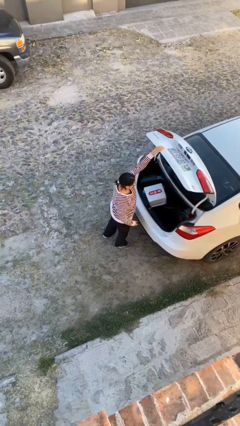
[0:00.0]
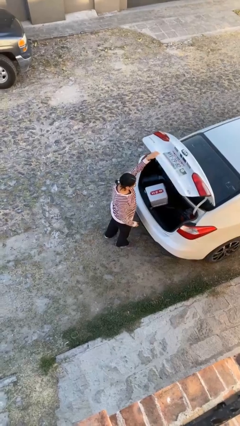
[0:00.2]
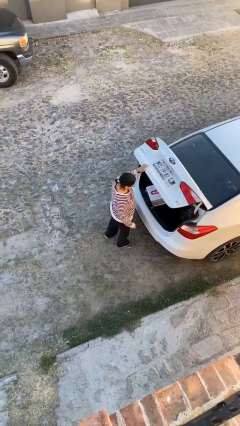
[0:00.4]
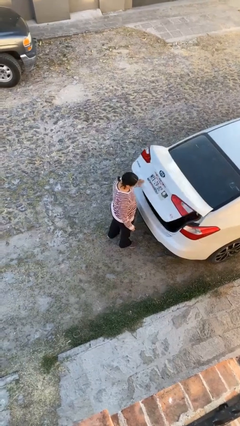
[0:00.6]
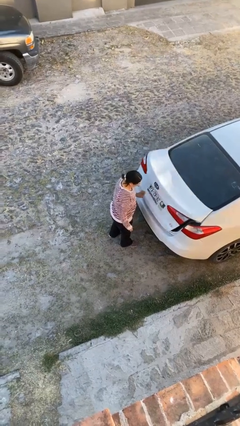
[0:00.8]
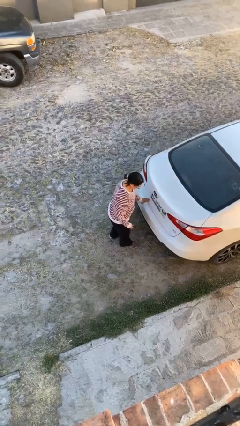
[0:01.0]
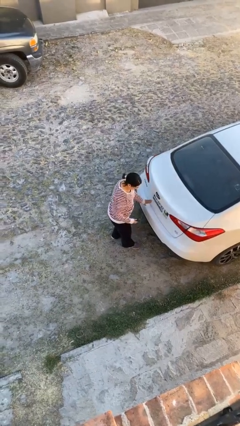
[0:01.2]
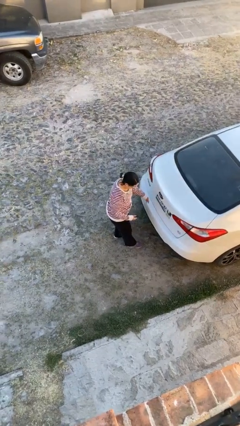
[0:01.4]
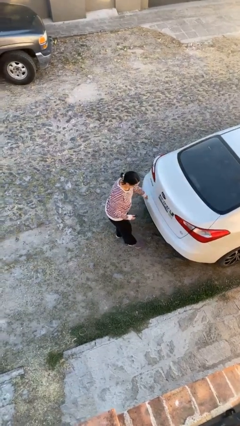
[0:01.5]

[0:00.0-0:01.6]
person closes car trunk

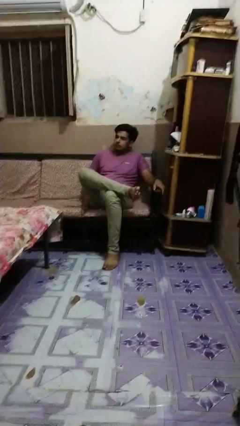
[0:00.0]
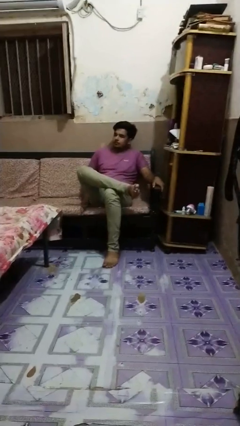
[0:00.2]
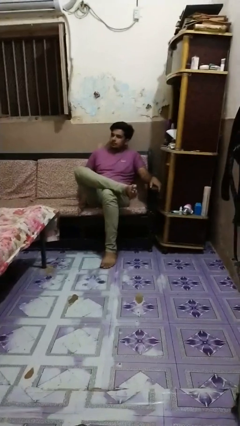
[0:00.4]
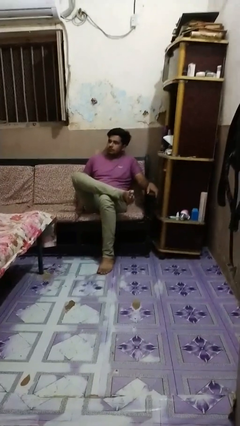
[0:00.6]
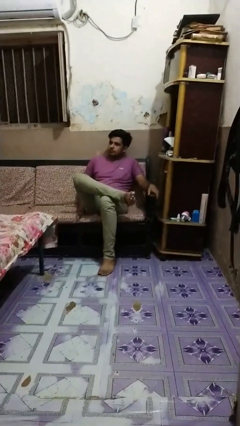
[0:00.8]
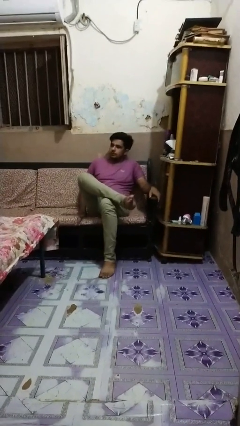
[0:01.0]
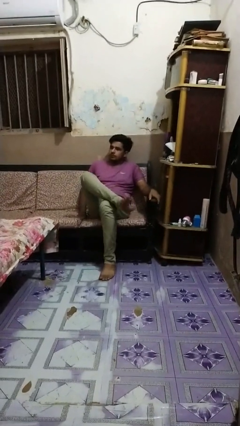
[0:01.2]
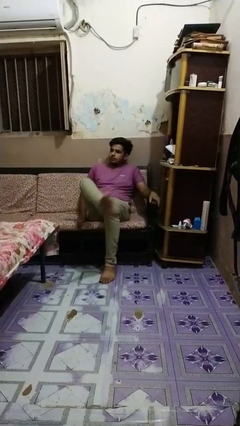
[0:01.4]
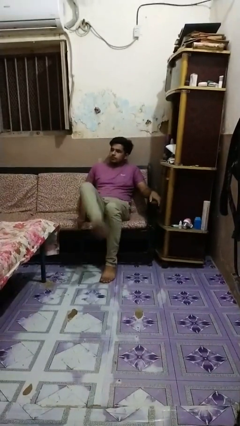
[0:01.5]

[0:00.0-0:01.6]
person crosses legs

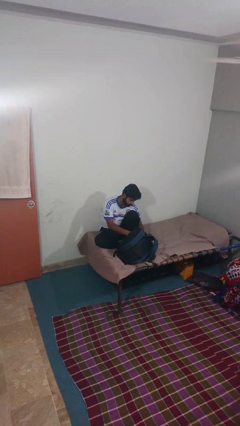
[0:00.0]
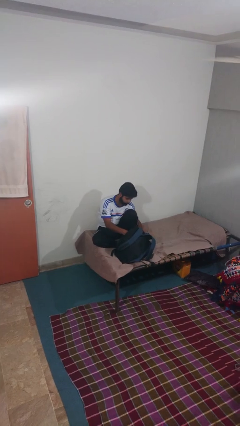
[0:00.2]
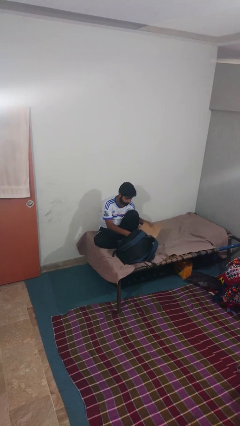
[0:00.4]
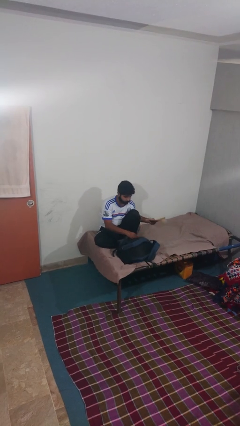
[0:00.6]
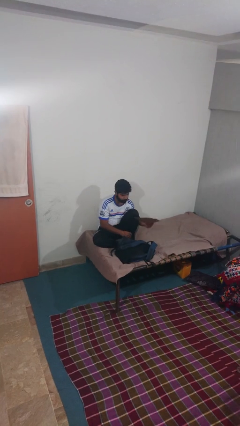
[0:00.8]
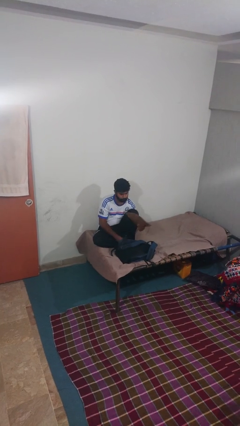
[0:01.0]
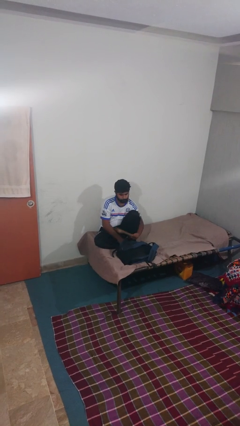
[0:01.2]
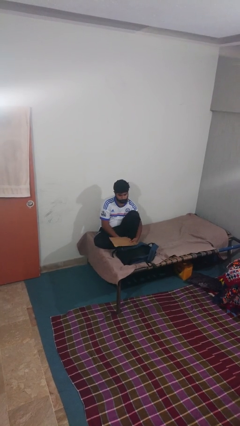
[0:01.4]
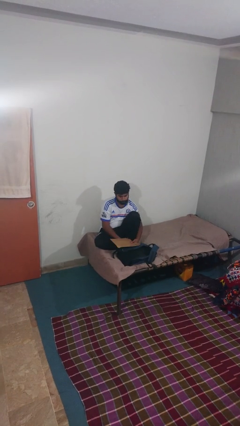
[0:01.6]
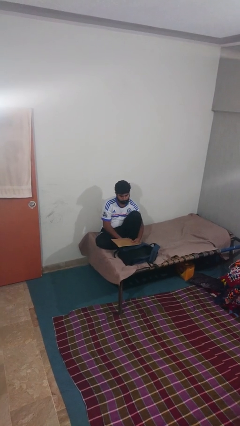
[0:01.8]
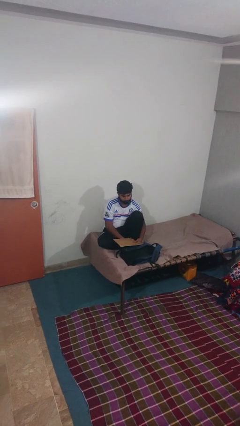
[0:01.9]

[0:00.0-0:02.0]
person takes object from backpack

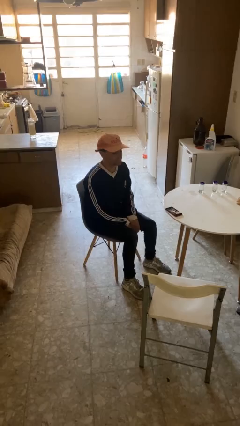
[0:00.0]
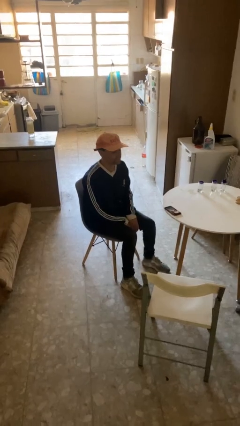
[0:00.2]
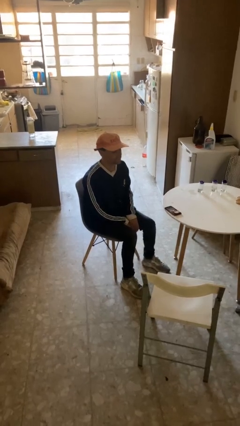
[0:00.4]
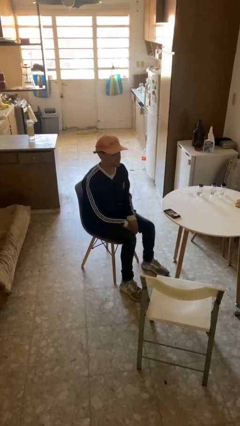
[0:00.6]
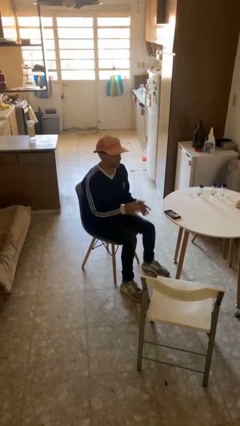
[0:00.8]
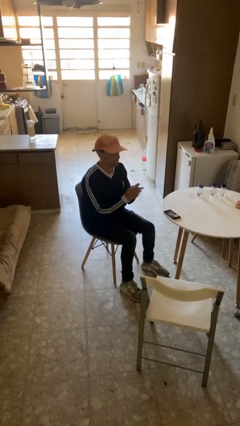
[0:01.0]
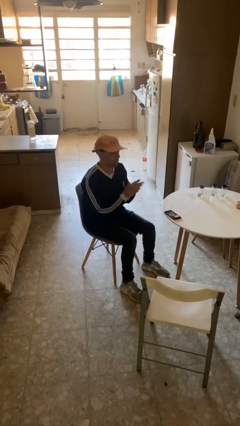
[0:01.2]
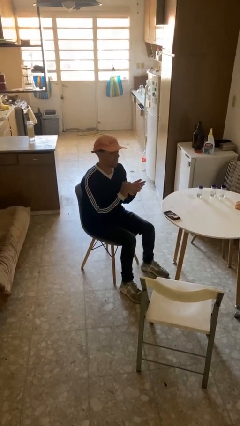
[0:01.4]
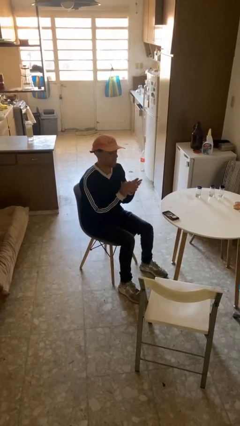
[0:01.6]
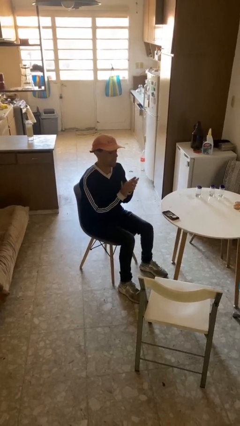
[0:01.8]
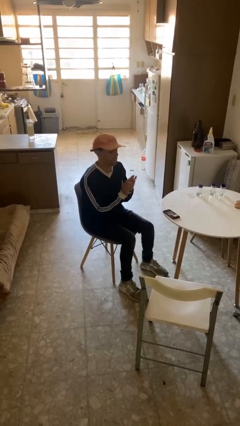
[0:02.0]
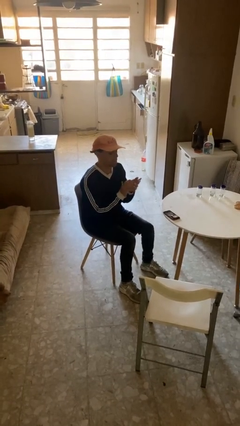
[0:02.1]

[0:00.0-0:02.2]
person claps hands

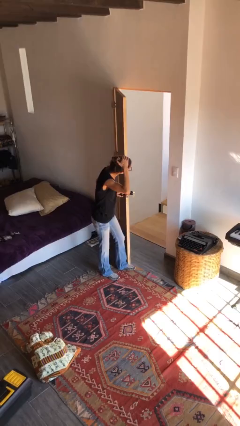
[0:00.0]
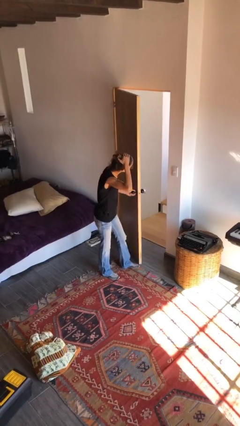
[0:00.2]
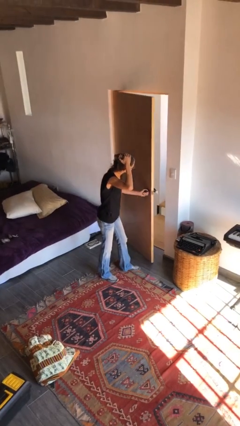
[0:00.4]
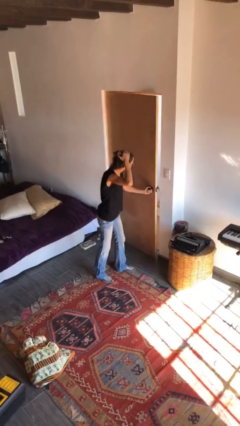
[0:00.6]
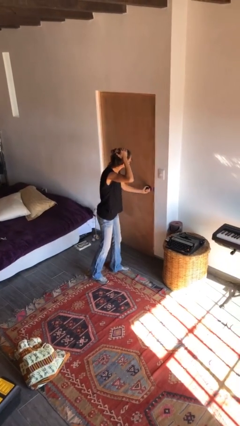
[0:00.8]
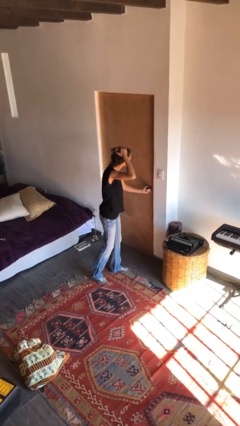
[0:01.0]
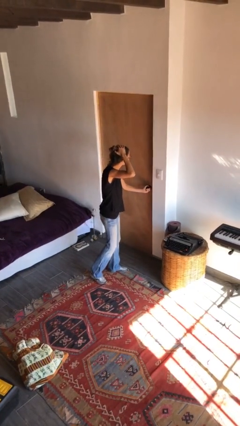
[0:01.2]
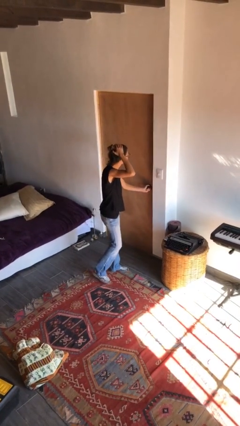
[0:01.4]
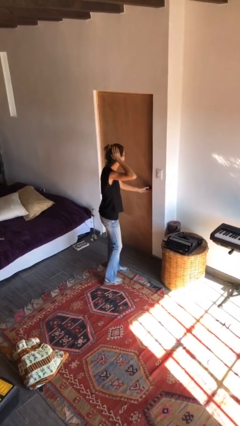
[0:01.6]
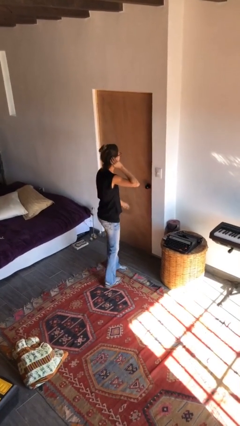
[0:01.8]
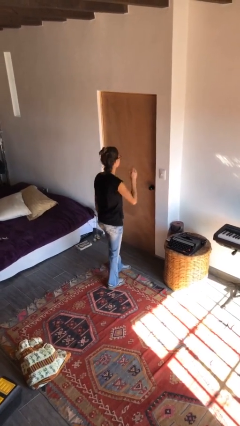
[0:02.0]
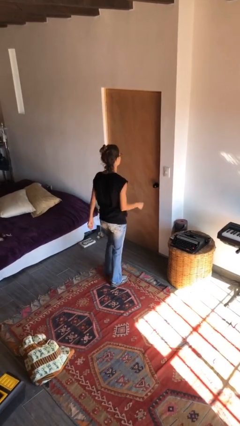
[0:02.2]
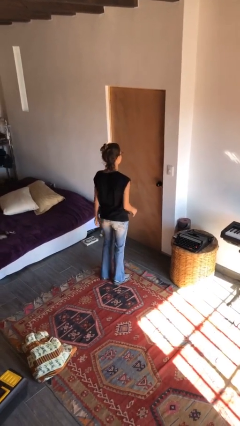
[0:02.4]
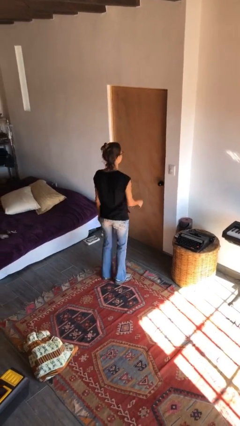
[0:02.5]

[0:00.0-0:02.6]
person closes facility door

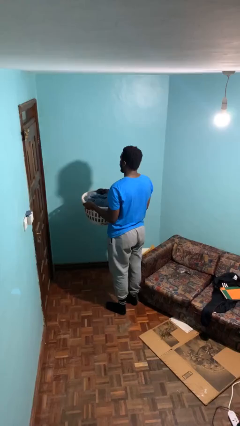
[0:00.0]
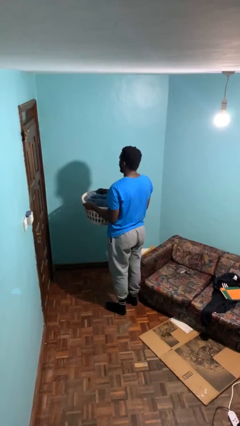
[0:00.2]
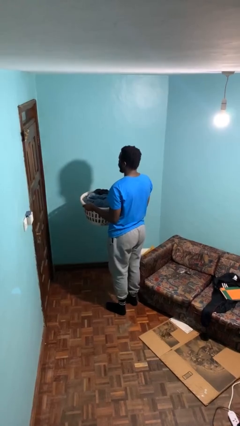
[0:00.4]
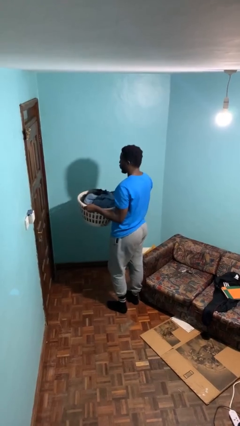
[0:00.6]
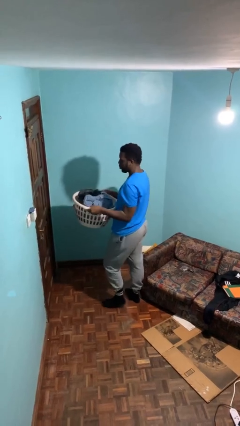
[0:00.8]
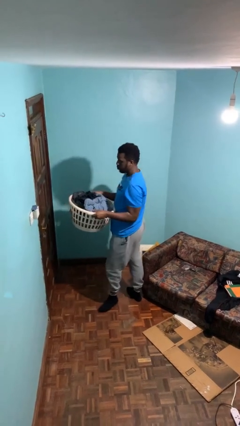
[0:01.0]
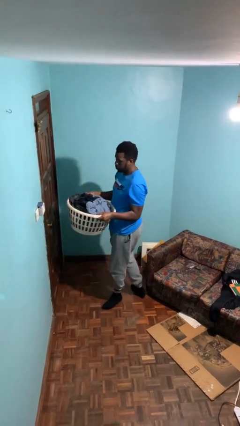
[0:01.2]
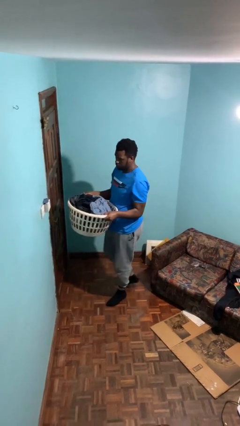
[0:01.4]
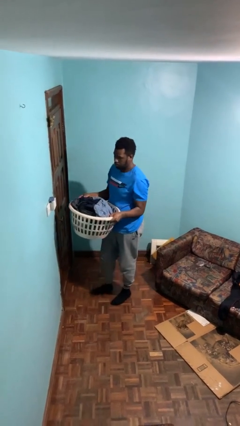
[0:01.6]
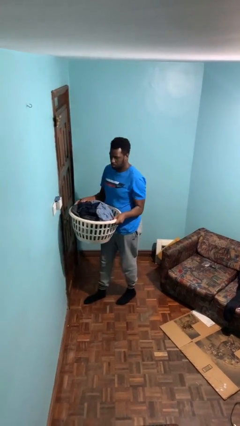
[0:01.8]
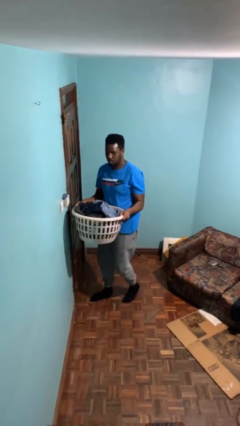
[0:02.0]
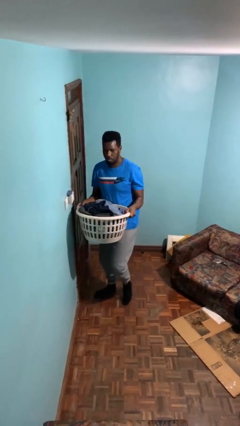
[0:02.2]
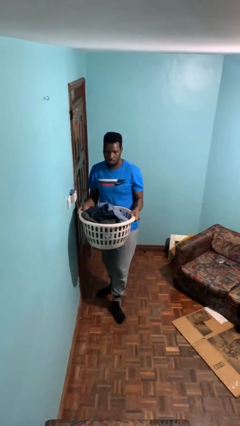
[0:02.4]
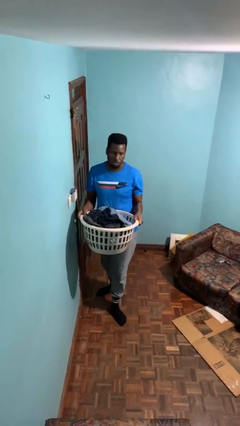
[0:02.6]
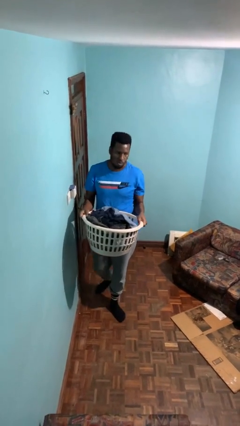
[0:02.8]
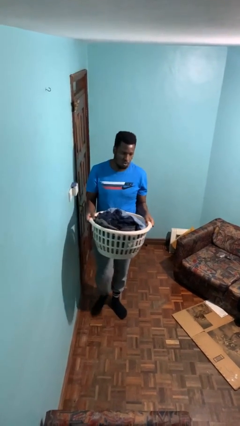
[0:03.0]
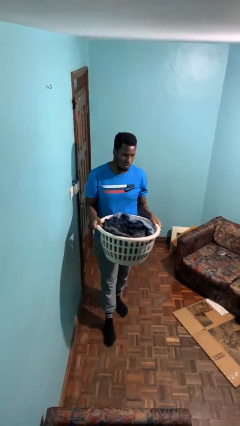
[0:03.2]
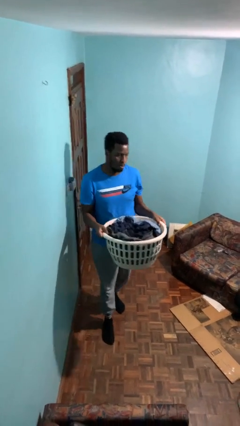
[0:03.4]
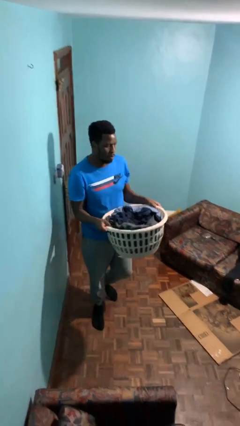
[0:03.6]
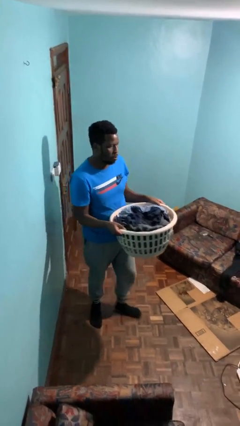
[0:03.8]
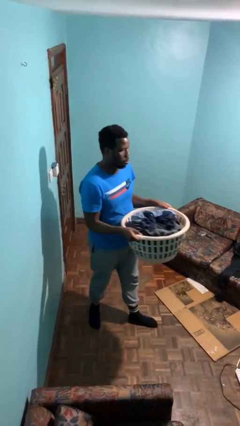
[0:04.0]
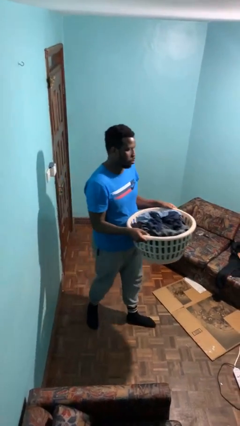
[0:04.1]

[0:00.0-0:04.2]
person carries laundry basket

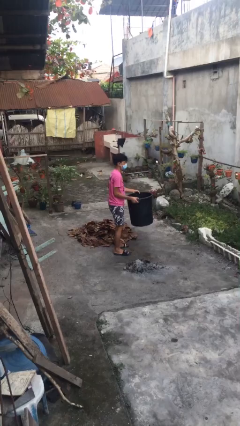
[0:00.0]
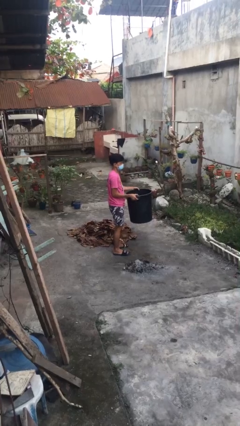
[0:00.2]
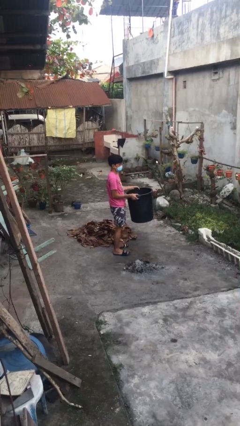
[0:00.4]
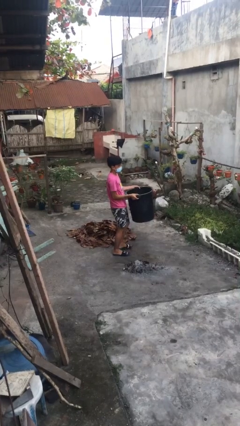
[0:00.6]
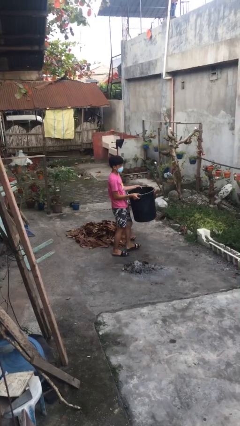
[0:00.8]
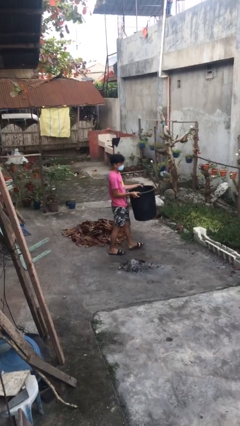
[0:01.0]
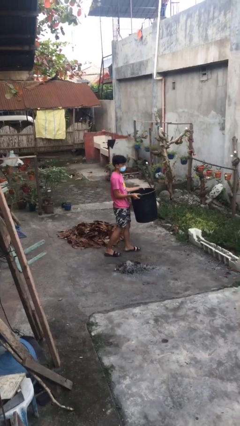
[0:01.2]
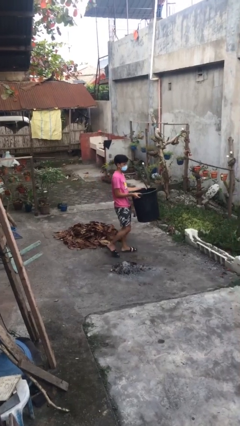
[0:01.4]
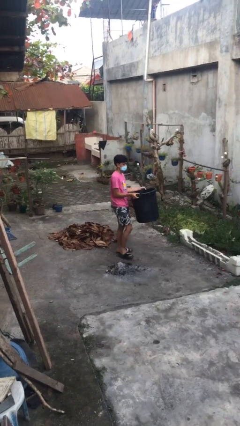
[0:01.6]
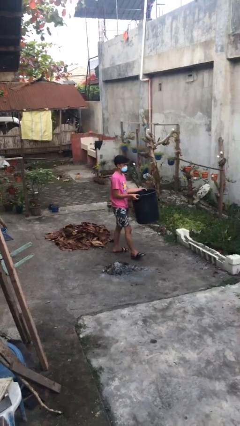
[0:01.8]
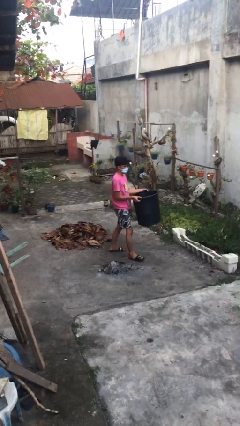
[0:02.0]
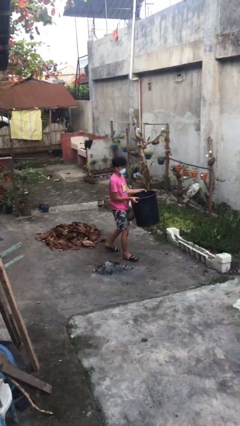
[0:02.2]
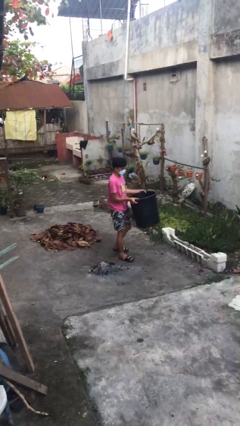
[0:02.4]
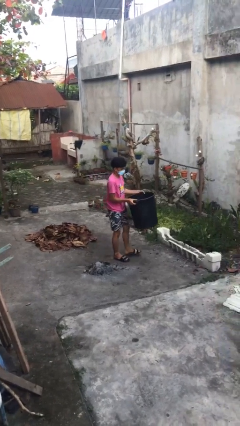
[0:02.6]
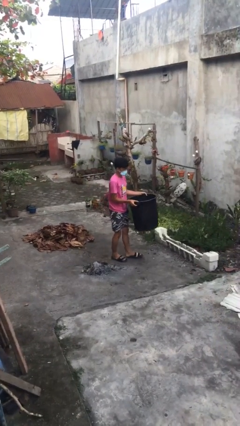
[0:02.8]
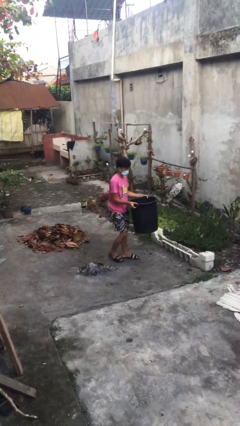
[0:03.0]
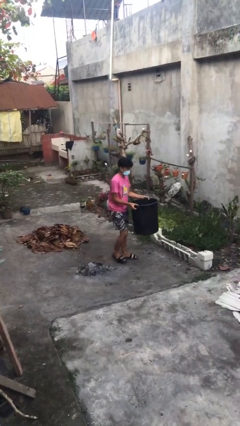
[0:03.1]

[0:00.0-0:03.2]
person carries heavy object
